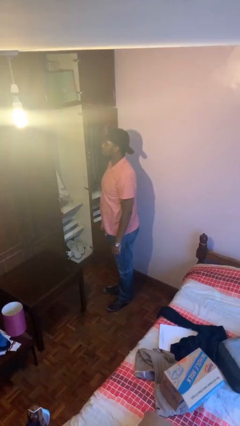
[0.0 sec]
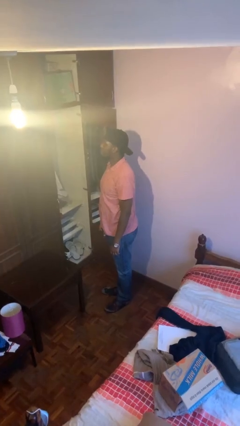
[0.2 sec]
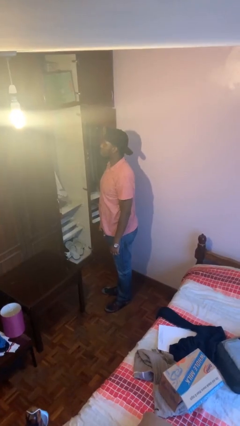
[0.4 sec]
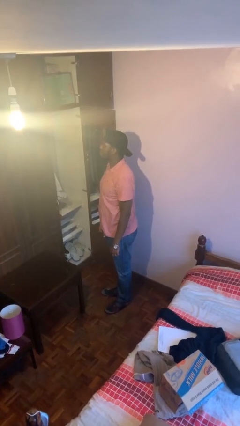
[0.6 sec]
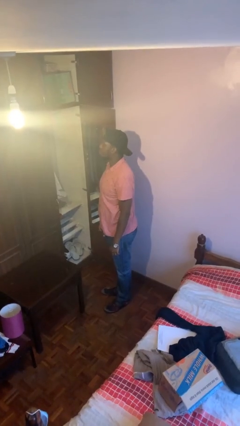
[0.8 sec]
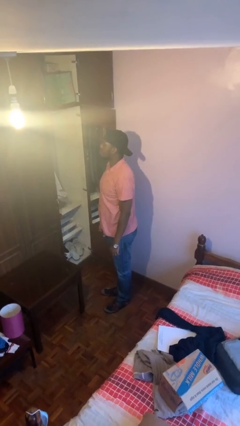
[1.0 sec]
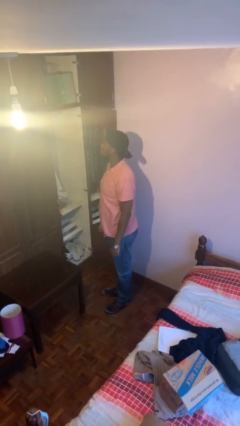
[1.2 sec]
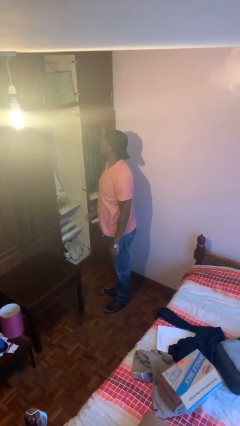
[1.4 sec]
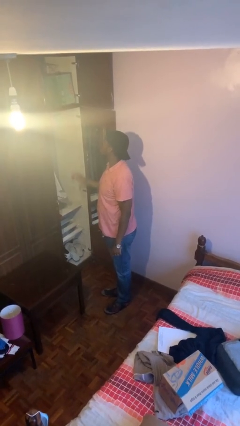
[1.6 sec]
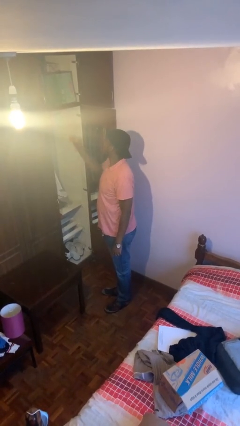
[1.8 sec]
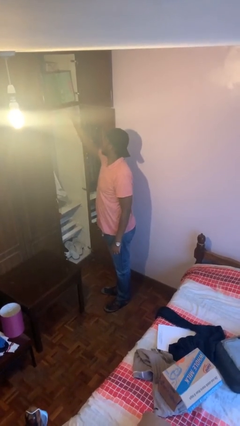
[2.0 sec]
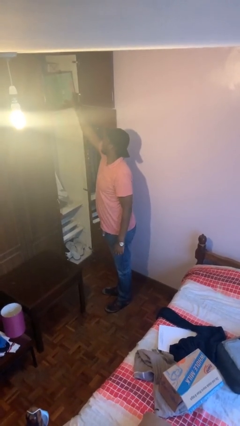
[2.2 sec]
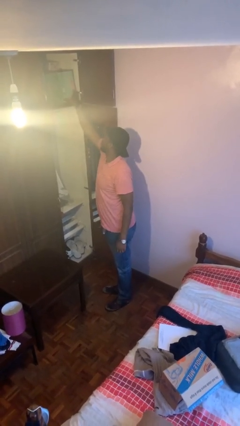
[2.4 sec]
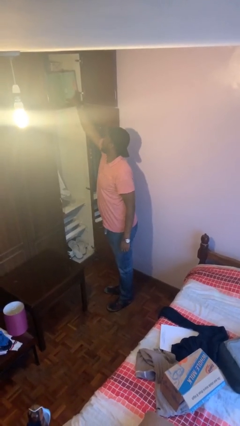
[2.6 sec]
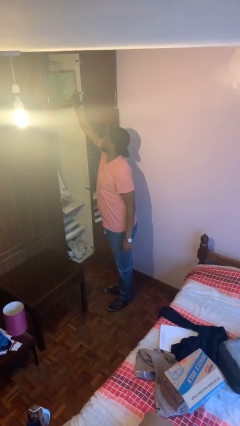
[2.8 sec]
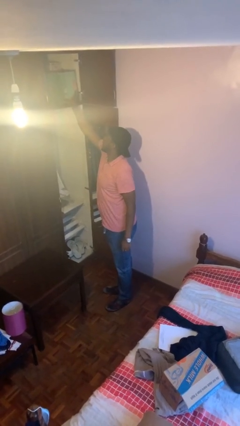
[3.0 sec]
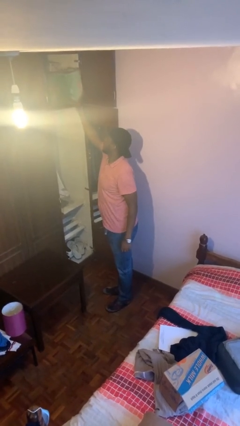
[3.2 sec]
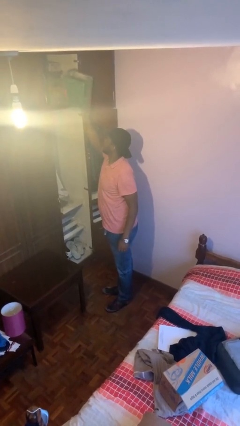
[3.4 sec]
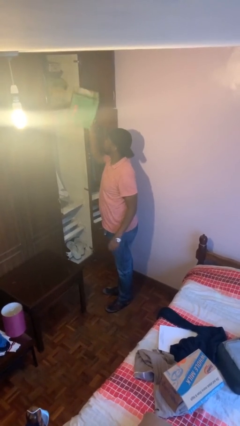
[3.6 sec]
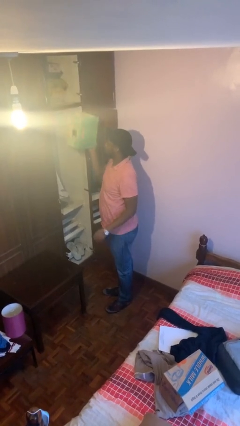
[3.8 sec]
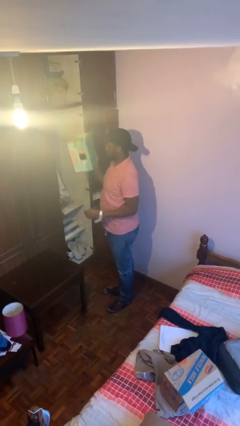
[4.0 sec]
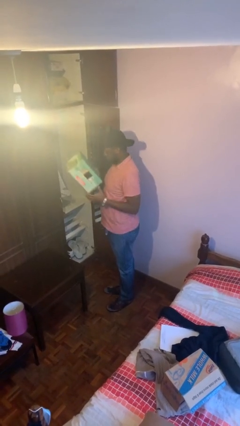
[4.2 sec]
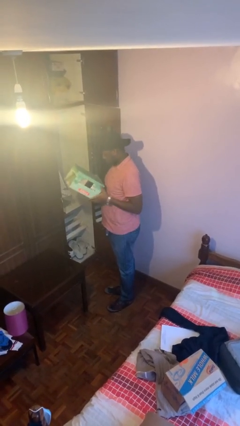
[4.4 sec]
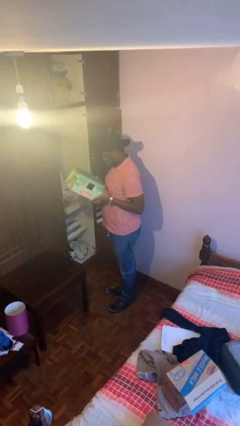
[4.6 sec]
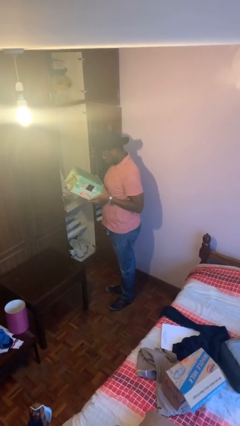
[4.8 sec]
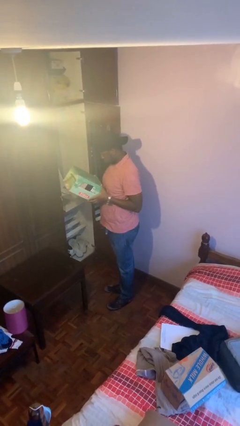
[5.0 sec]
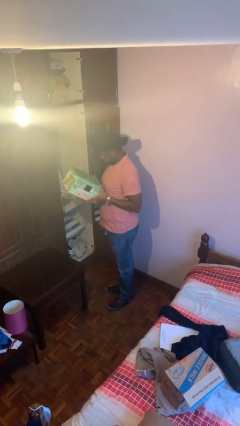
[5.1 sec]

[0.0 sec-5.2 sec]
person picks up object from shelf

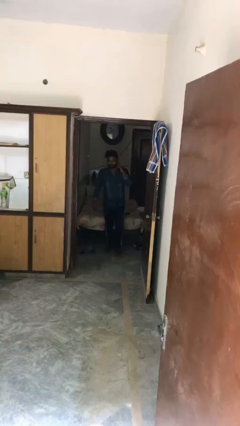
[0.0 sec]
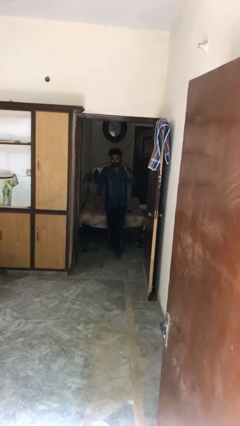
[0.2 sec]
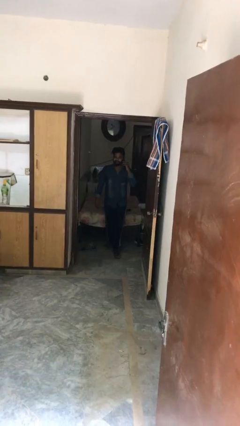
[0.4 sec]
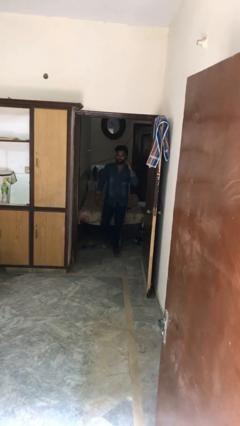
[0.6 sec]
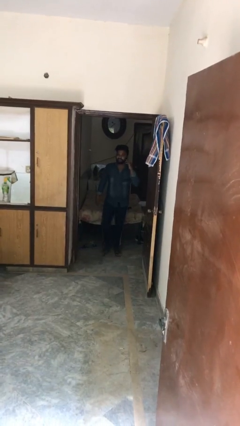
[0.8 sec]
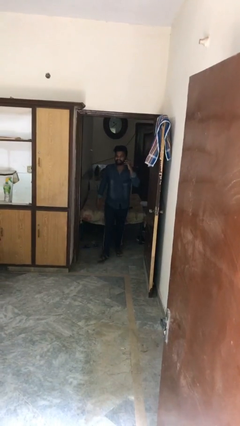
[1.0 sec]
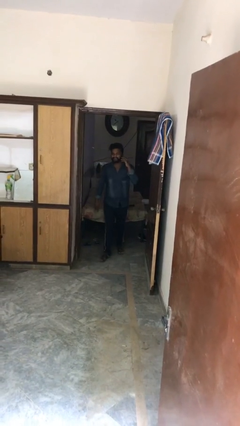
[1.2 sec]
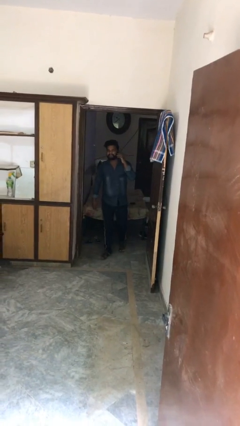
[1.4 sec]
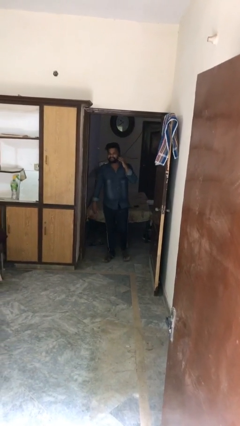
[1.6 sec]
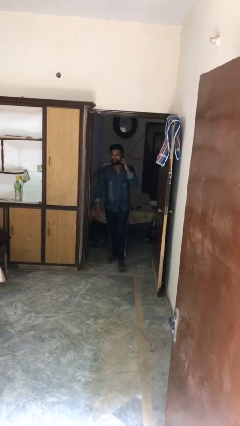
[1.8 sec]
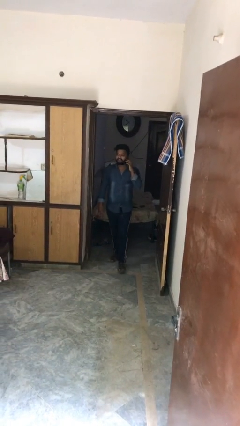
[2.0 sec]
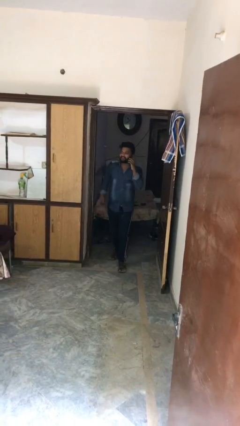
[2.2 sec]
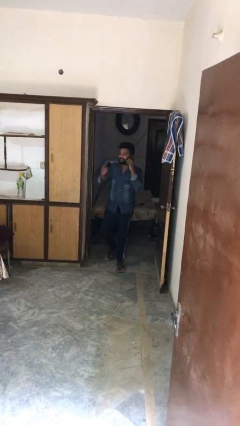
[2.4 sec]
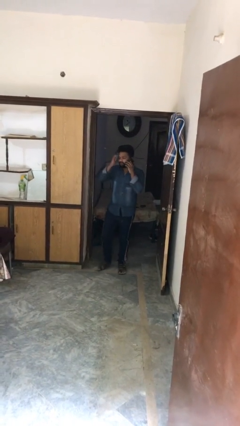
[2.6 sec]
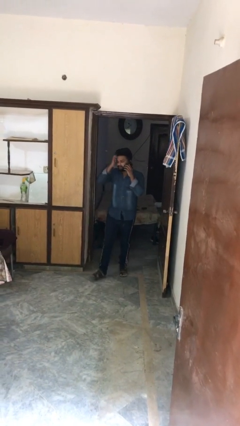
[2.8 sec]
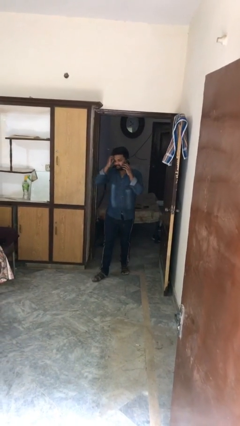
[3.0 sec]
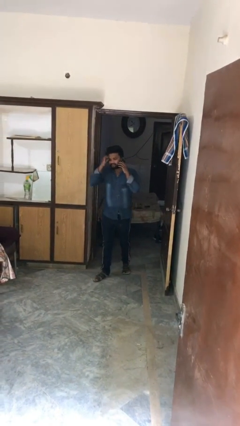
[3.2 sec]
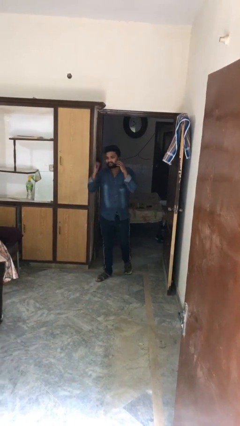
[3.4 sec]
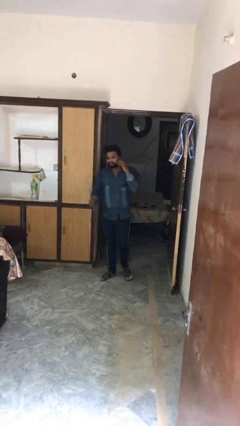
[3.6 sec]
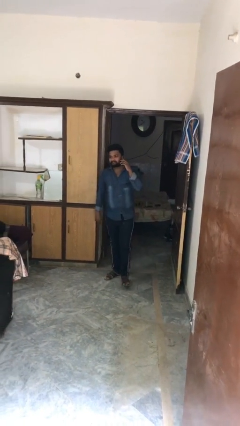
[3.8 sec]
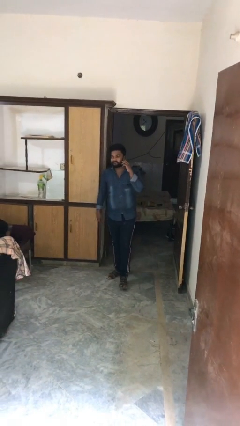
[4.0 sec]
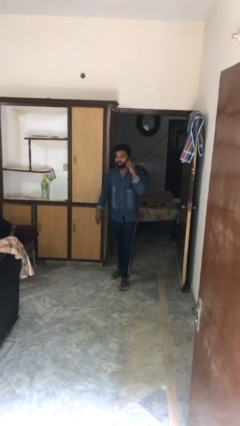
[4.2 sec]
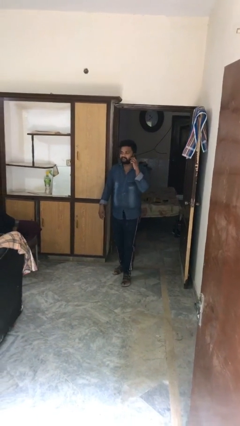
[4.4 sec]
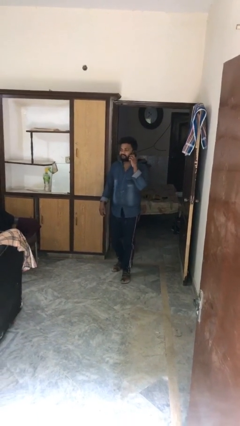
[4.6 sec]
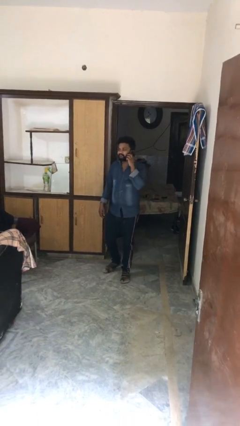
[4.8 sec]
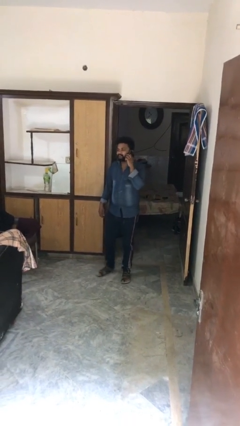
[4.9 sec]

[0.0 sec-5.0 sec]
person enters scene through structure

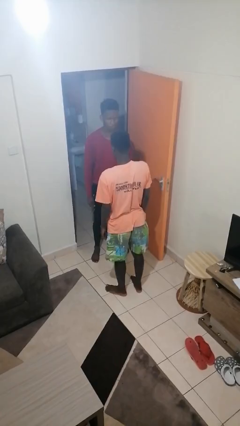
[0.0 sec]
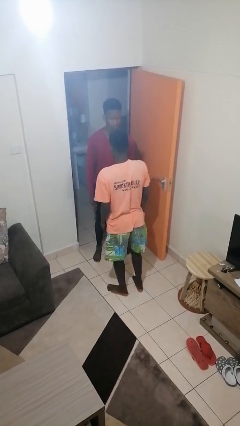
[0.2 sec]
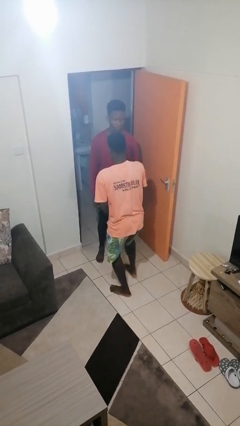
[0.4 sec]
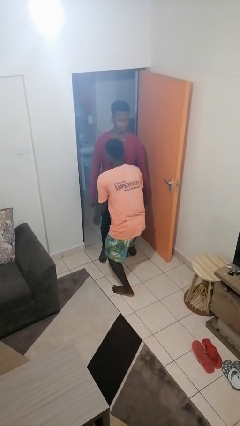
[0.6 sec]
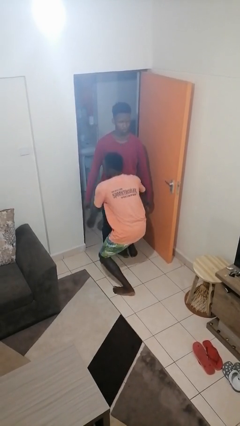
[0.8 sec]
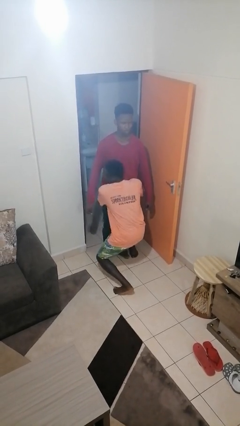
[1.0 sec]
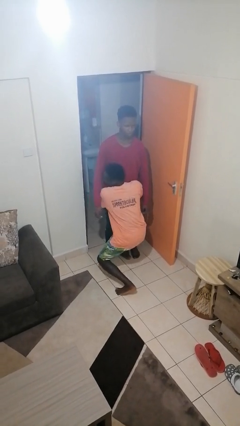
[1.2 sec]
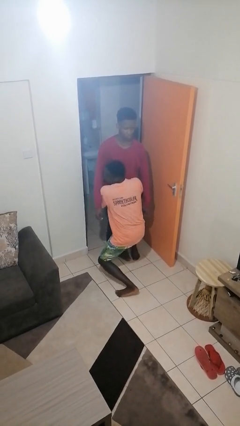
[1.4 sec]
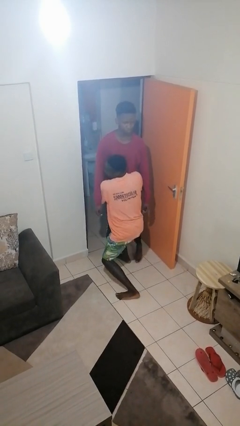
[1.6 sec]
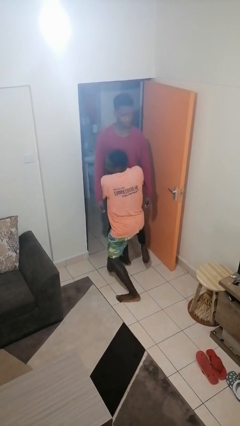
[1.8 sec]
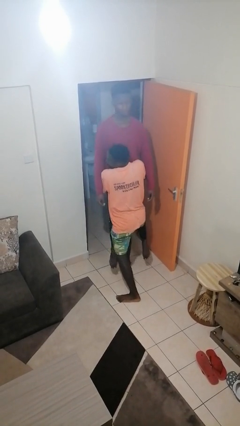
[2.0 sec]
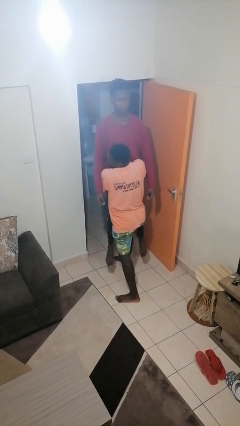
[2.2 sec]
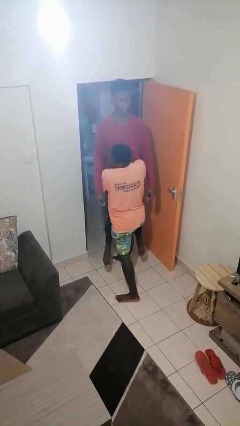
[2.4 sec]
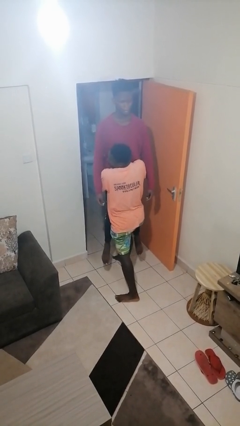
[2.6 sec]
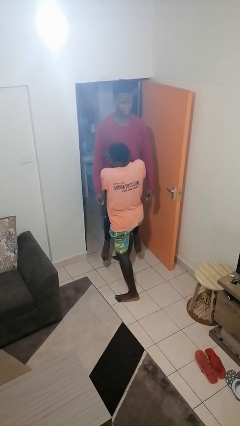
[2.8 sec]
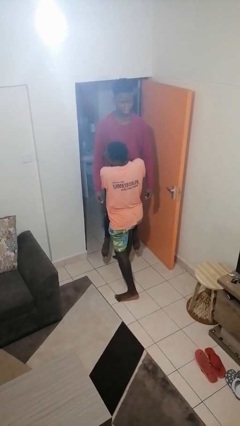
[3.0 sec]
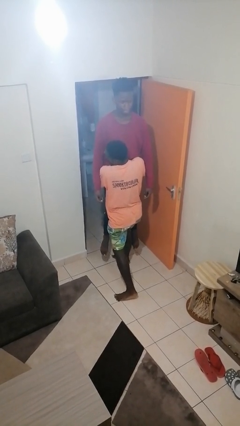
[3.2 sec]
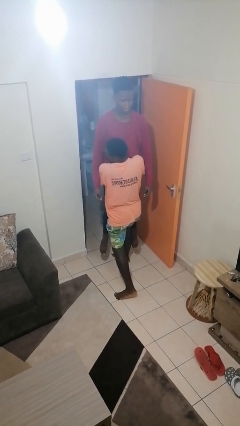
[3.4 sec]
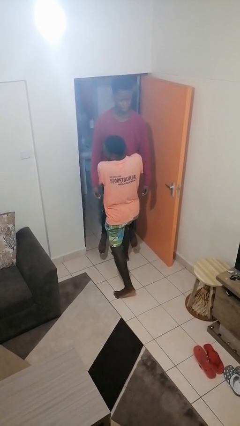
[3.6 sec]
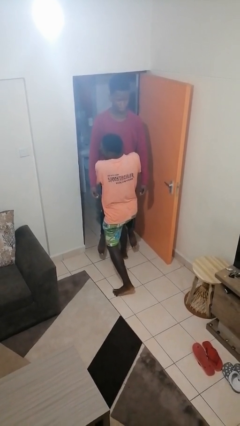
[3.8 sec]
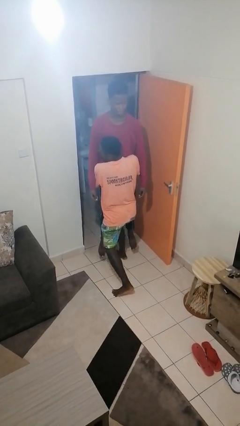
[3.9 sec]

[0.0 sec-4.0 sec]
person picks up person

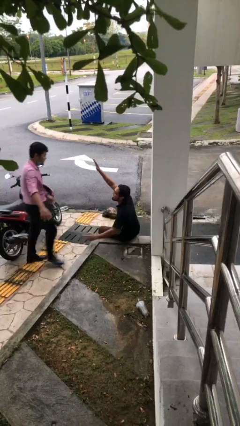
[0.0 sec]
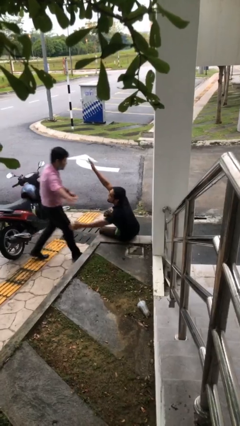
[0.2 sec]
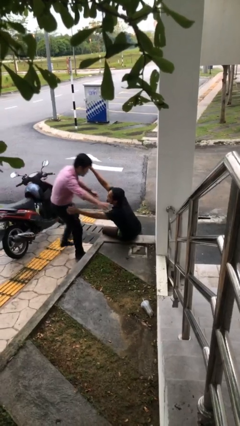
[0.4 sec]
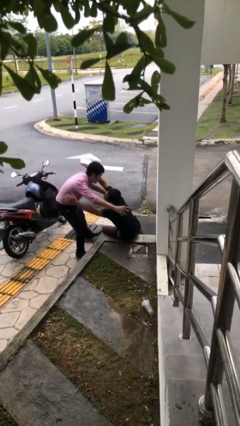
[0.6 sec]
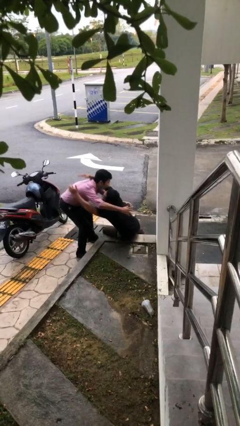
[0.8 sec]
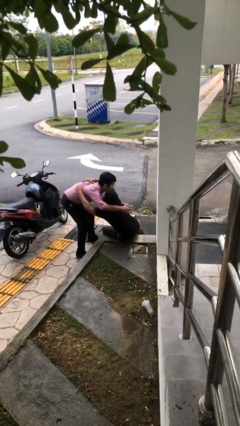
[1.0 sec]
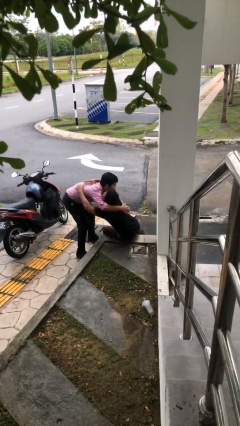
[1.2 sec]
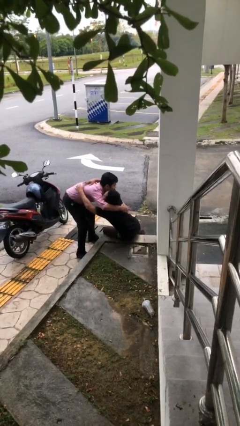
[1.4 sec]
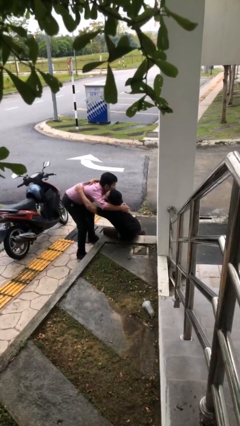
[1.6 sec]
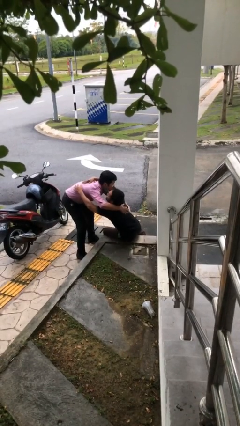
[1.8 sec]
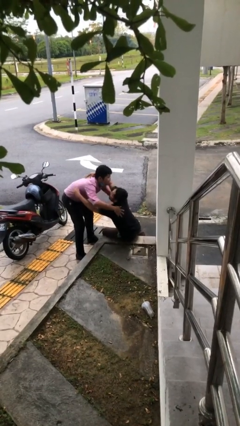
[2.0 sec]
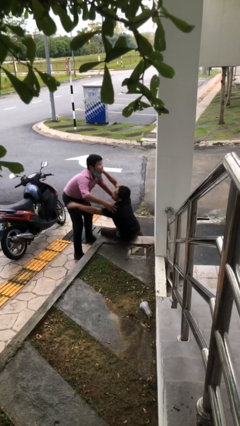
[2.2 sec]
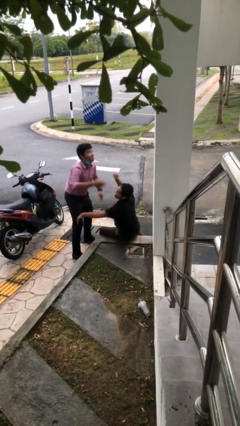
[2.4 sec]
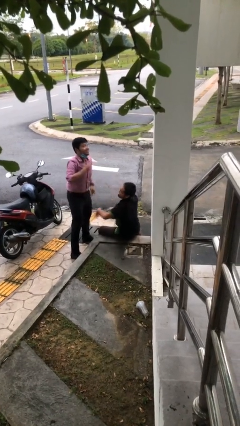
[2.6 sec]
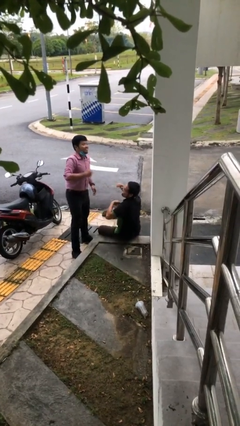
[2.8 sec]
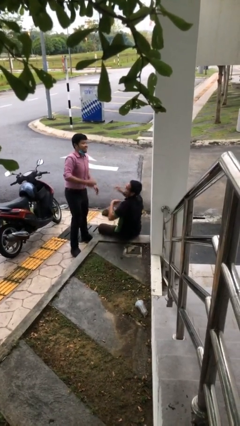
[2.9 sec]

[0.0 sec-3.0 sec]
person embraces person

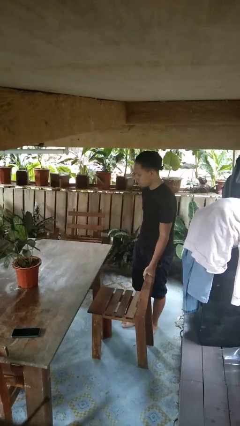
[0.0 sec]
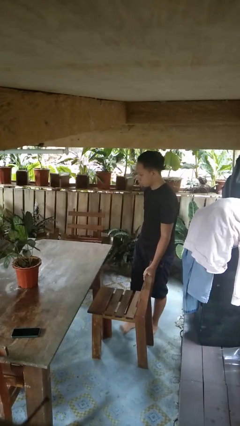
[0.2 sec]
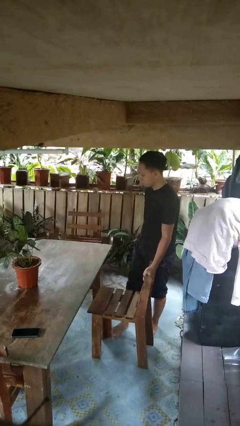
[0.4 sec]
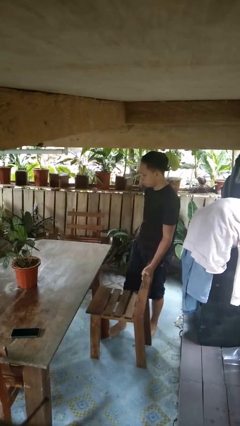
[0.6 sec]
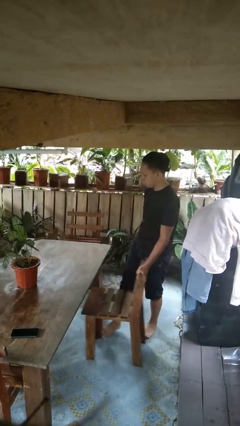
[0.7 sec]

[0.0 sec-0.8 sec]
person pushes in chair
